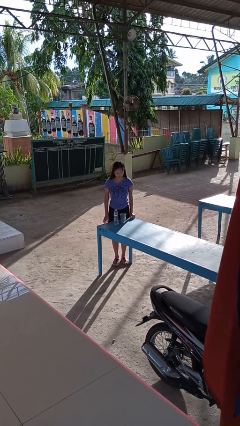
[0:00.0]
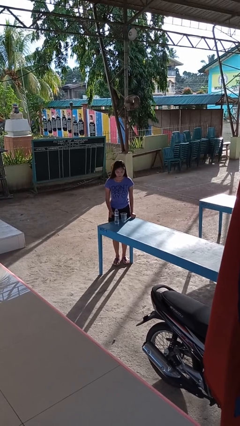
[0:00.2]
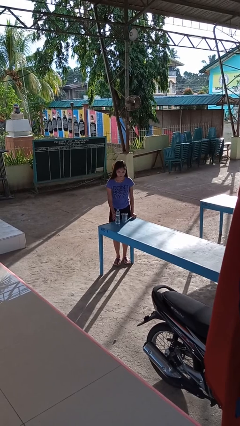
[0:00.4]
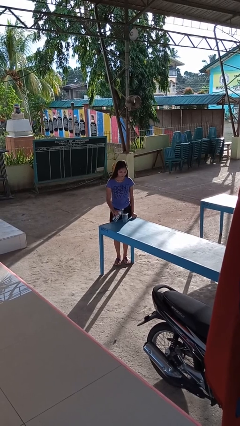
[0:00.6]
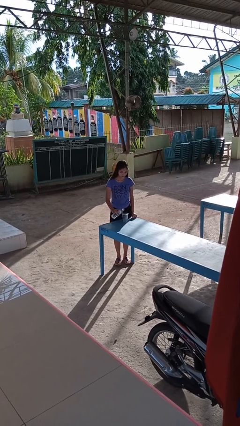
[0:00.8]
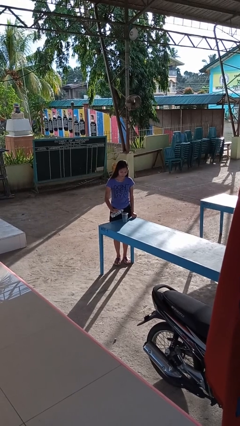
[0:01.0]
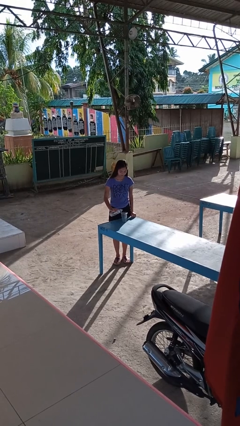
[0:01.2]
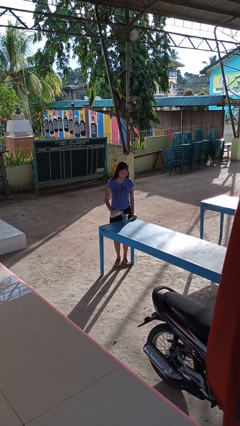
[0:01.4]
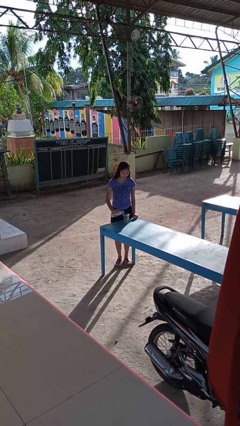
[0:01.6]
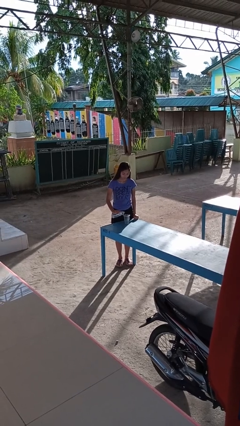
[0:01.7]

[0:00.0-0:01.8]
person pours liquid into cup

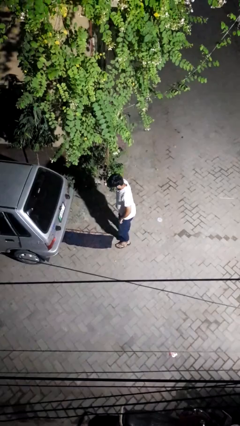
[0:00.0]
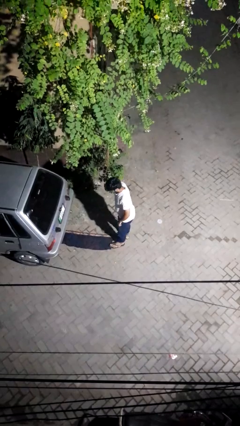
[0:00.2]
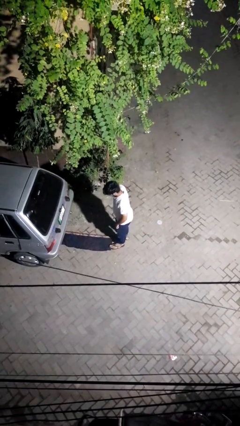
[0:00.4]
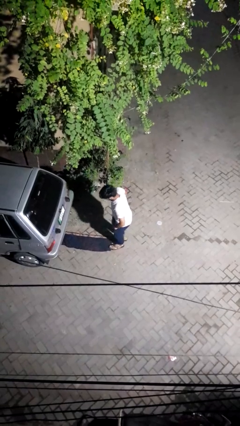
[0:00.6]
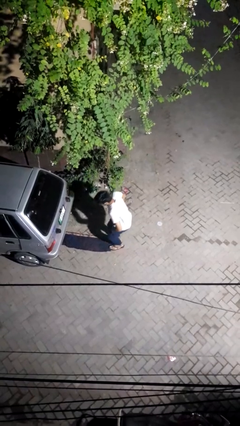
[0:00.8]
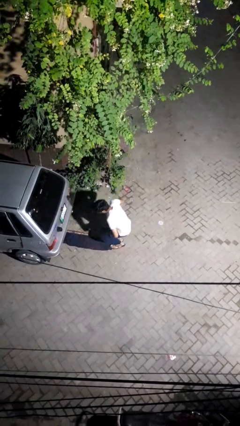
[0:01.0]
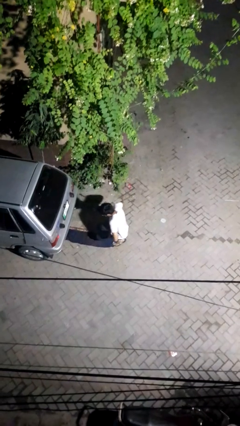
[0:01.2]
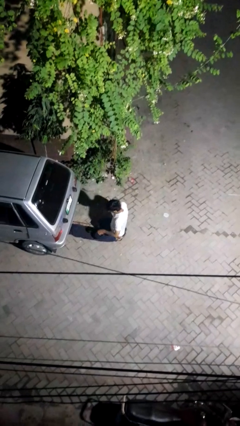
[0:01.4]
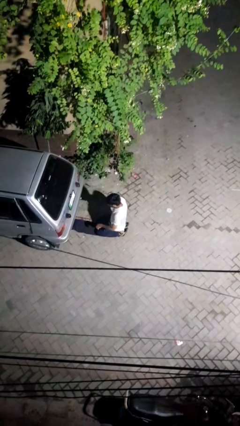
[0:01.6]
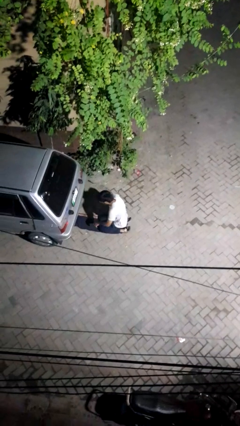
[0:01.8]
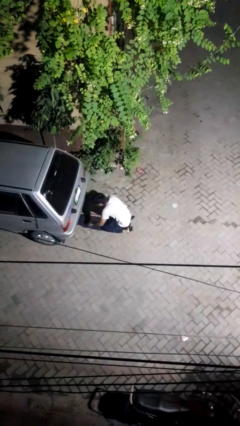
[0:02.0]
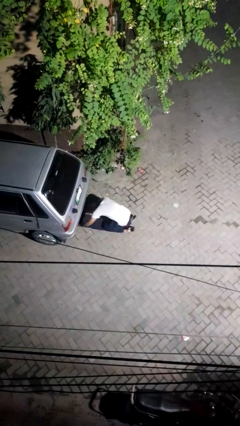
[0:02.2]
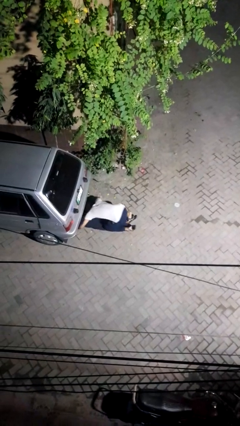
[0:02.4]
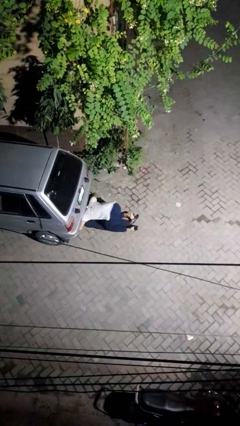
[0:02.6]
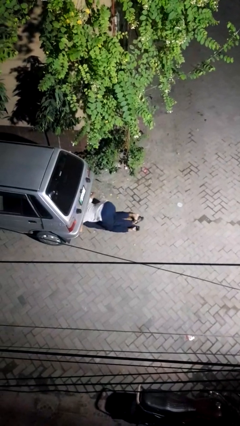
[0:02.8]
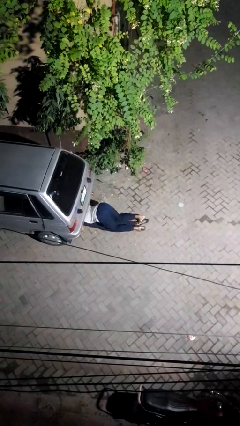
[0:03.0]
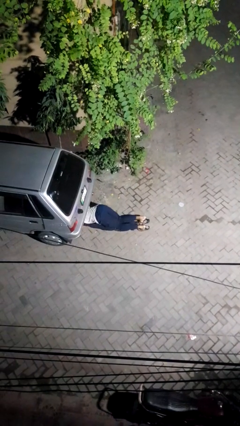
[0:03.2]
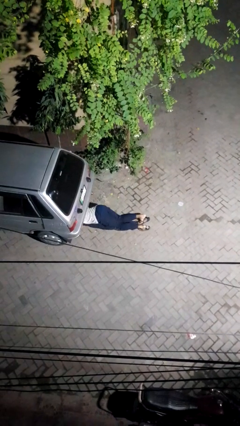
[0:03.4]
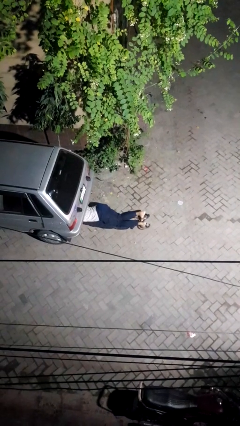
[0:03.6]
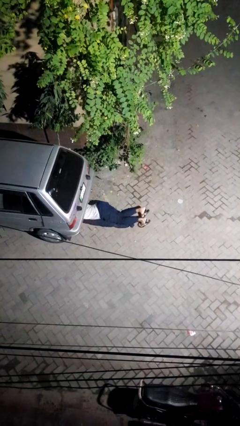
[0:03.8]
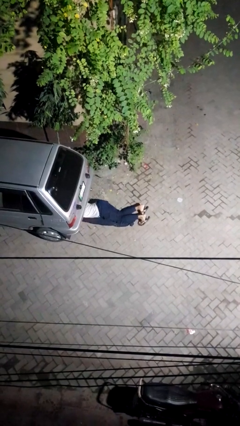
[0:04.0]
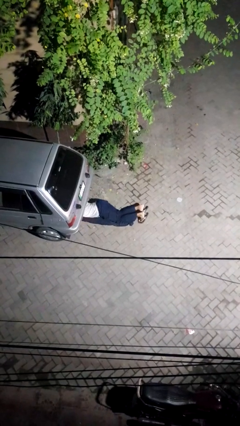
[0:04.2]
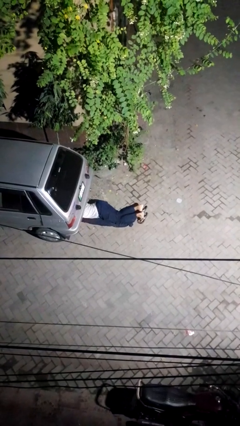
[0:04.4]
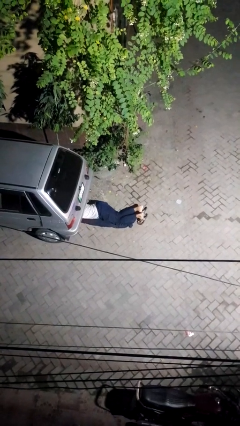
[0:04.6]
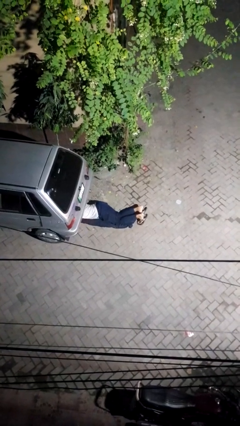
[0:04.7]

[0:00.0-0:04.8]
person crawls out from under vehicle

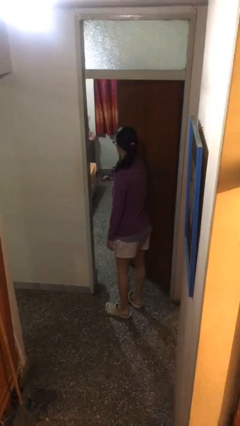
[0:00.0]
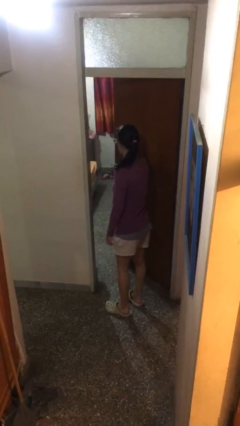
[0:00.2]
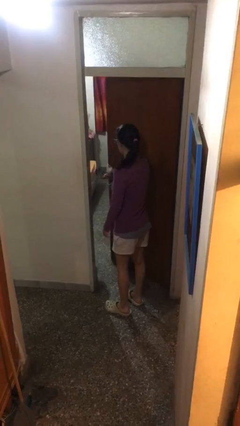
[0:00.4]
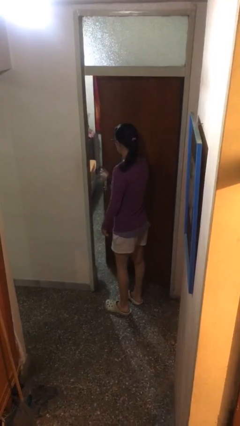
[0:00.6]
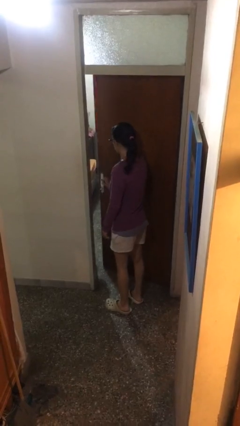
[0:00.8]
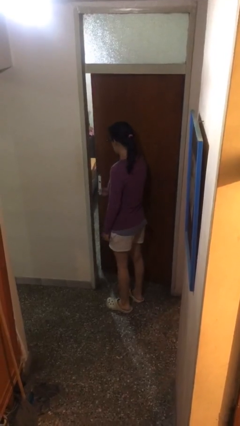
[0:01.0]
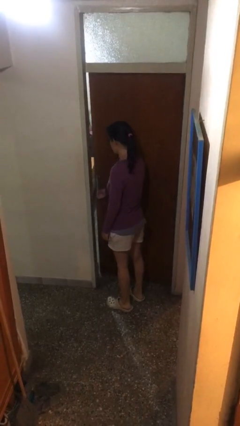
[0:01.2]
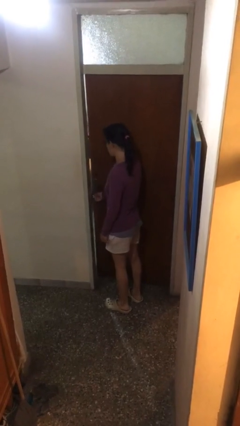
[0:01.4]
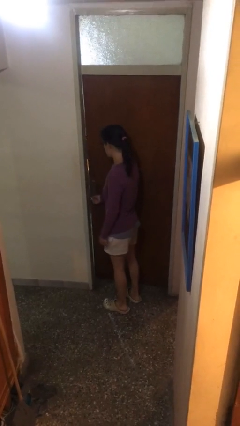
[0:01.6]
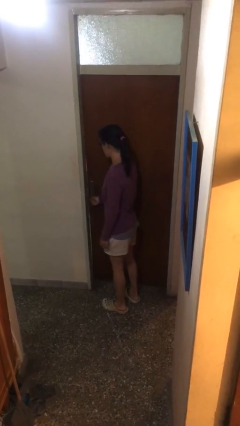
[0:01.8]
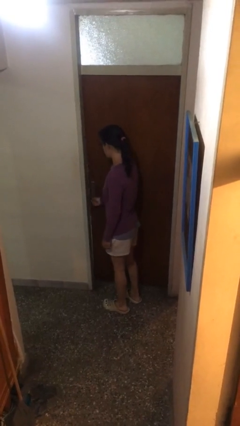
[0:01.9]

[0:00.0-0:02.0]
person closes facility door

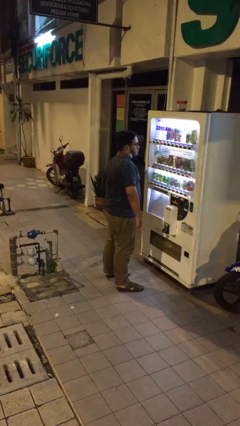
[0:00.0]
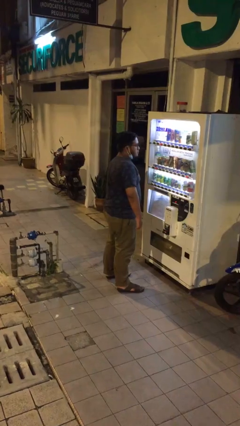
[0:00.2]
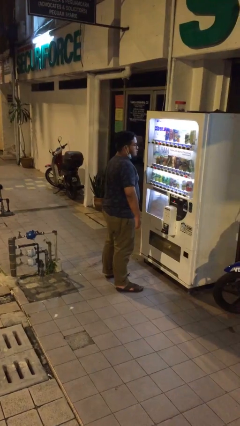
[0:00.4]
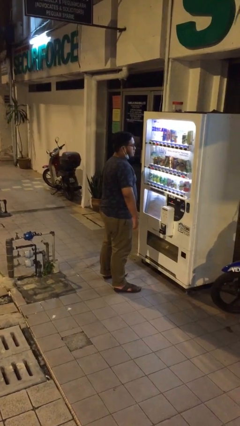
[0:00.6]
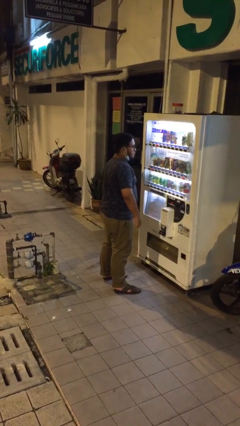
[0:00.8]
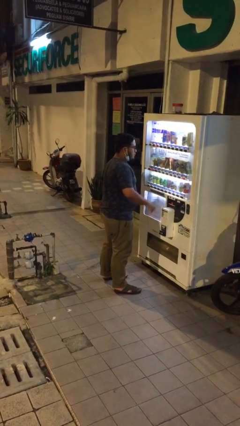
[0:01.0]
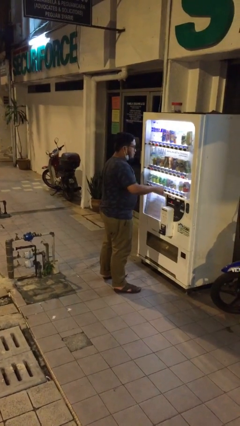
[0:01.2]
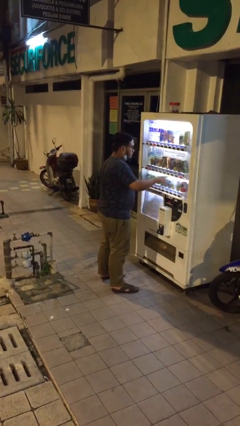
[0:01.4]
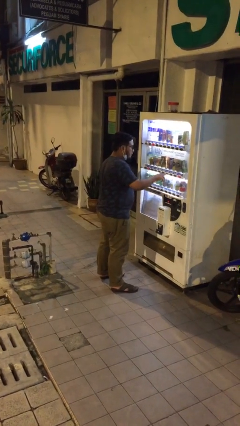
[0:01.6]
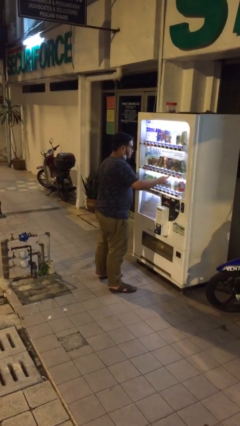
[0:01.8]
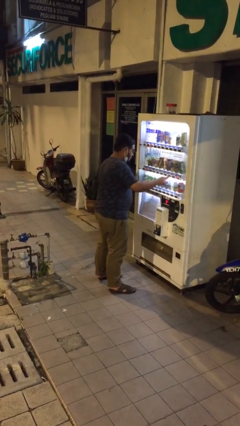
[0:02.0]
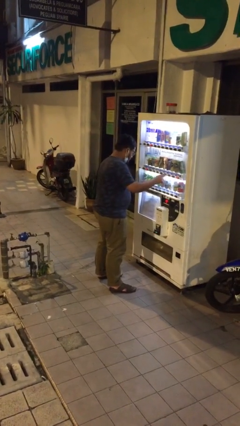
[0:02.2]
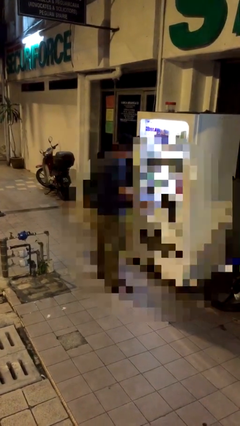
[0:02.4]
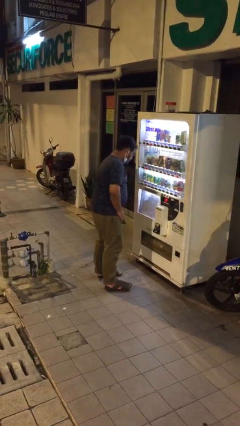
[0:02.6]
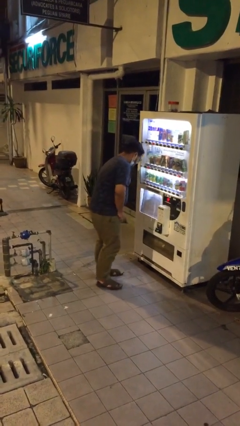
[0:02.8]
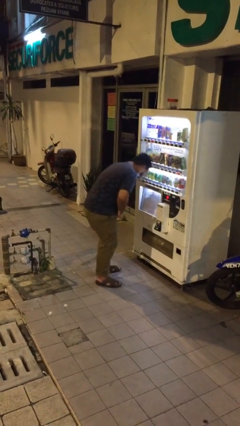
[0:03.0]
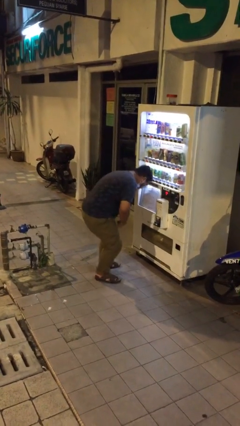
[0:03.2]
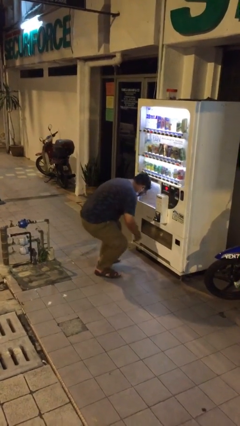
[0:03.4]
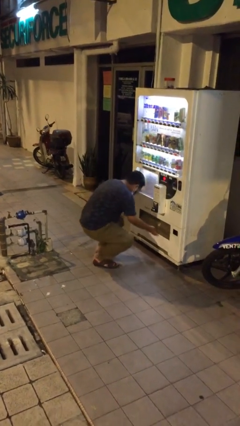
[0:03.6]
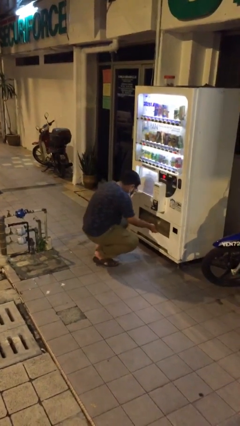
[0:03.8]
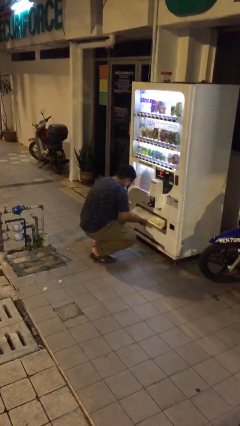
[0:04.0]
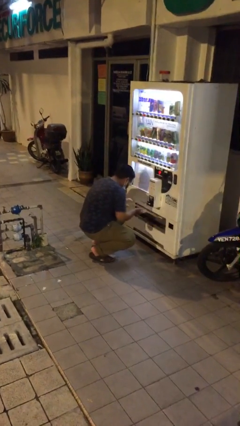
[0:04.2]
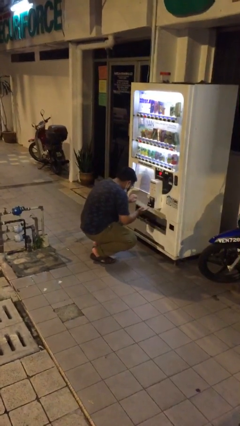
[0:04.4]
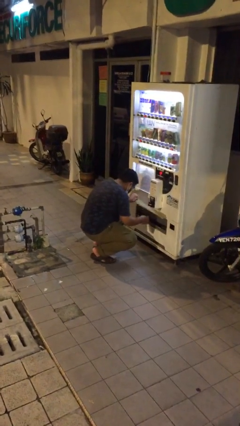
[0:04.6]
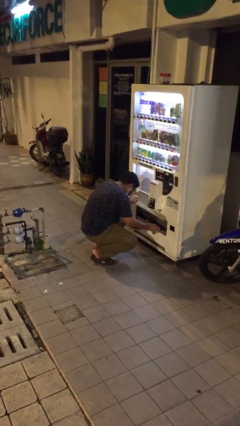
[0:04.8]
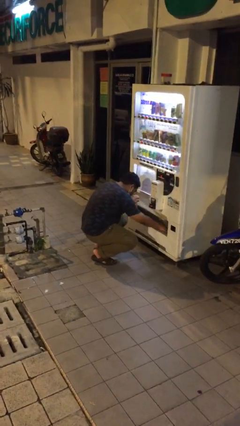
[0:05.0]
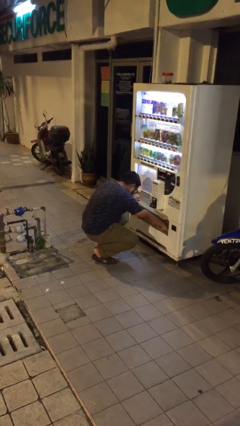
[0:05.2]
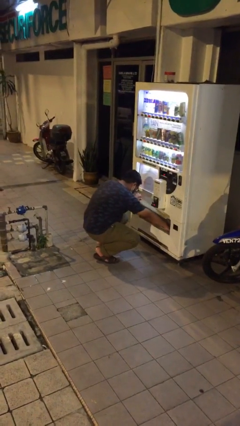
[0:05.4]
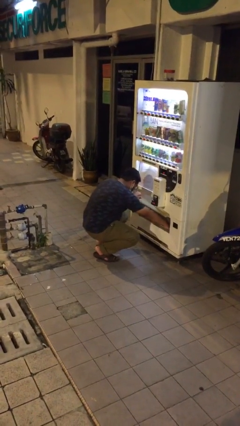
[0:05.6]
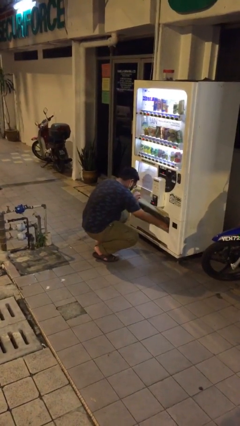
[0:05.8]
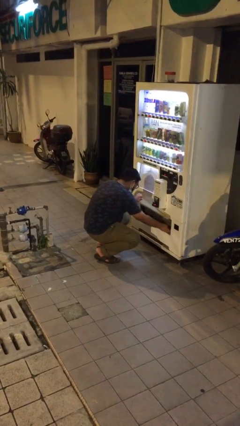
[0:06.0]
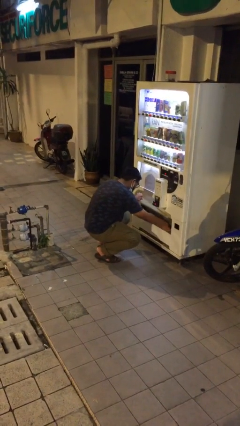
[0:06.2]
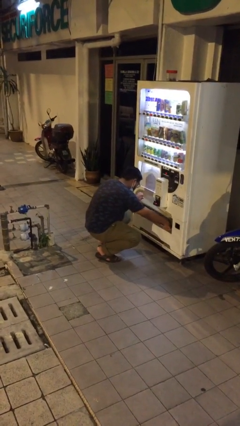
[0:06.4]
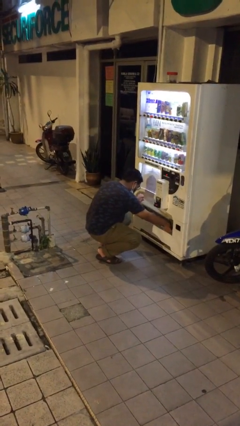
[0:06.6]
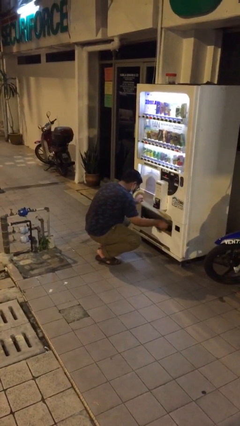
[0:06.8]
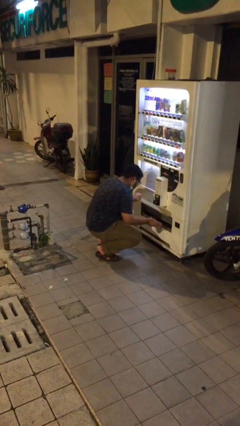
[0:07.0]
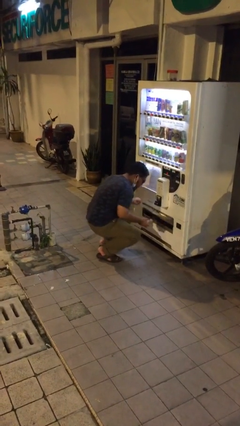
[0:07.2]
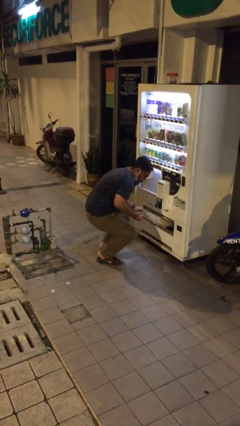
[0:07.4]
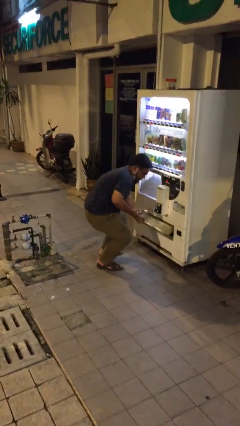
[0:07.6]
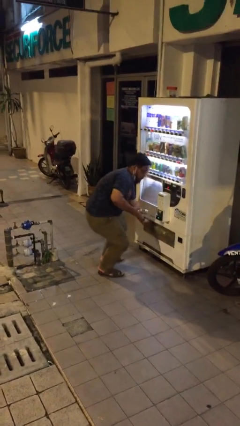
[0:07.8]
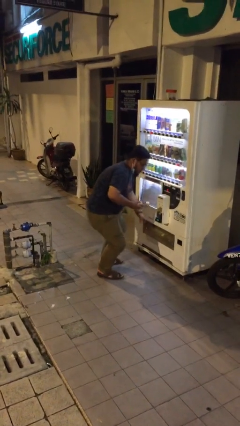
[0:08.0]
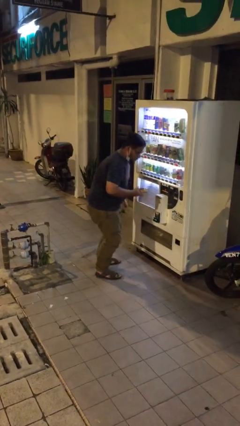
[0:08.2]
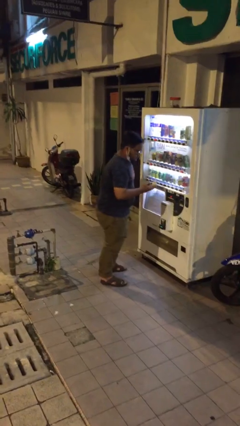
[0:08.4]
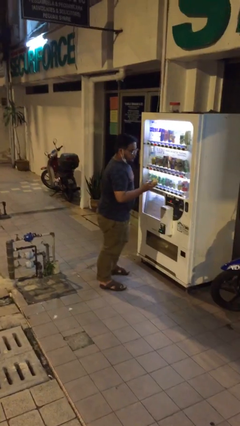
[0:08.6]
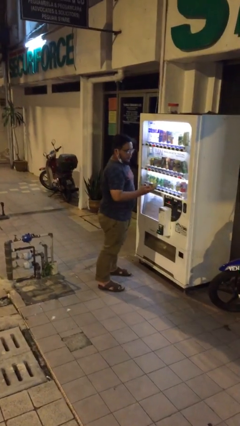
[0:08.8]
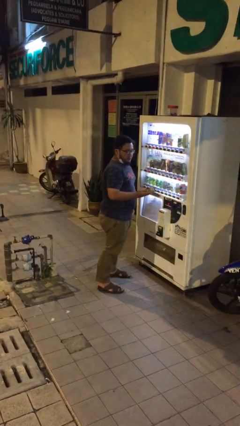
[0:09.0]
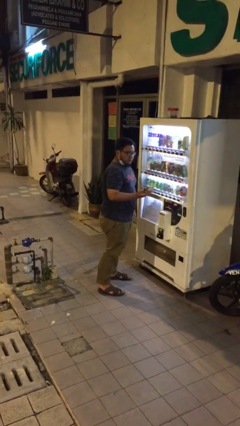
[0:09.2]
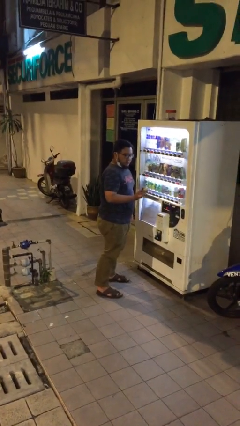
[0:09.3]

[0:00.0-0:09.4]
person purchases from machine
